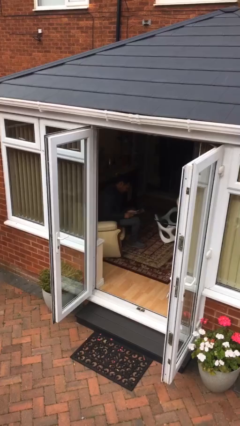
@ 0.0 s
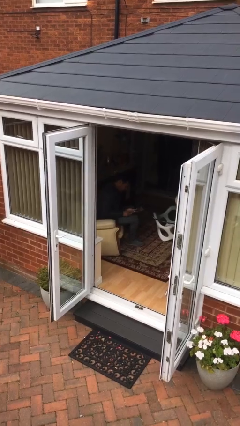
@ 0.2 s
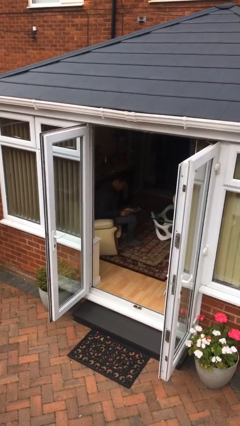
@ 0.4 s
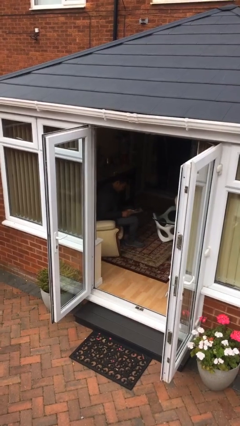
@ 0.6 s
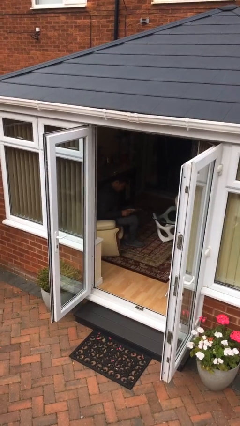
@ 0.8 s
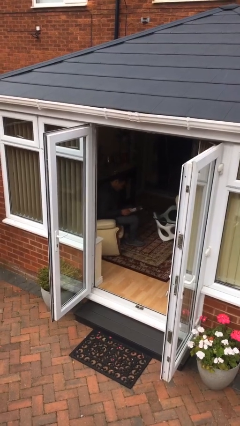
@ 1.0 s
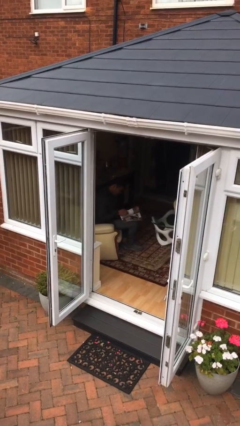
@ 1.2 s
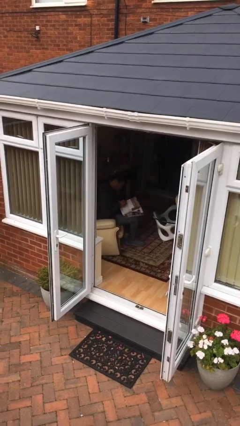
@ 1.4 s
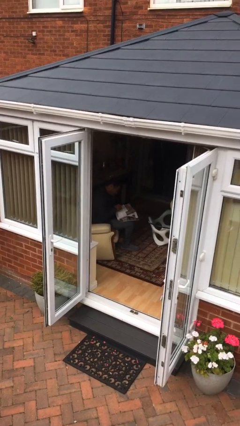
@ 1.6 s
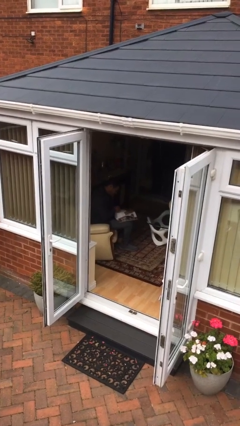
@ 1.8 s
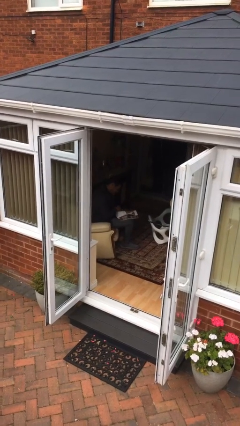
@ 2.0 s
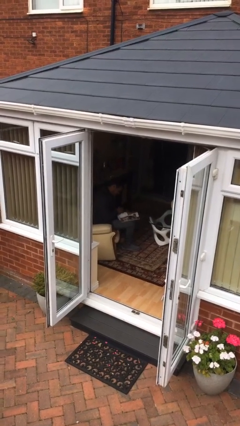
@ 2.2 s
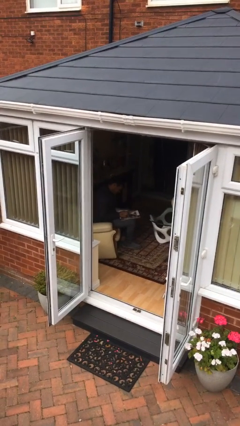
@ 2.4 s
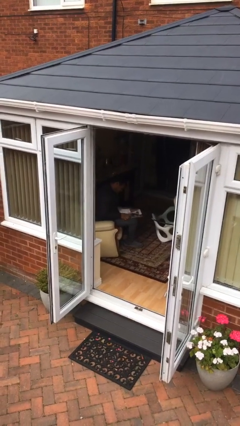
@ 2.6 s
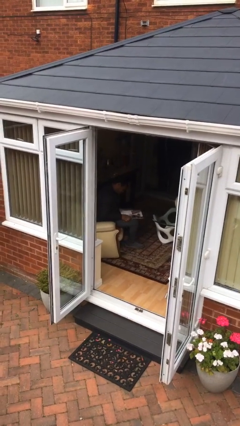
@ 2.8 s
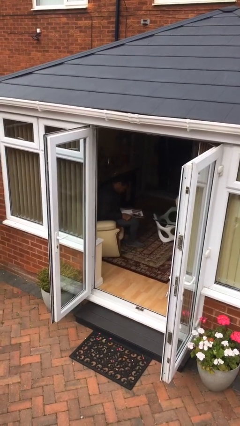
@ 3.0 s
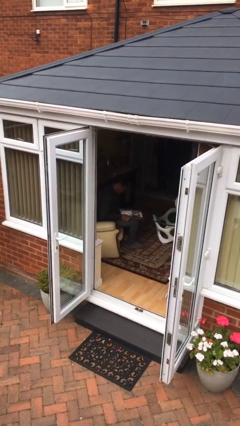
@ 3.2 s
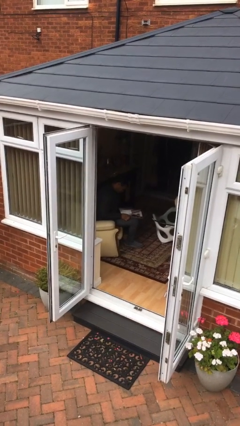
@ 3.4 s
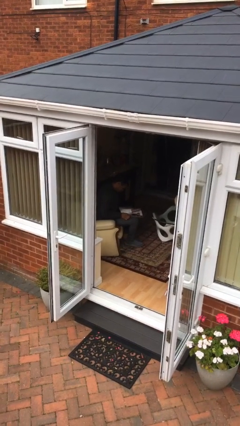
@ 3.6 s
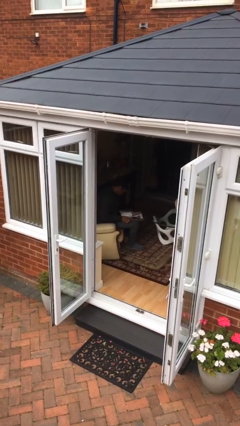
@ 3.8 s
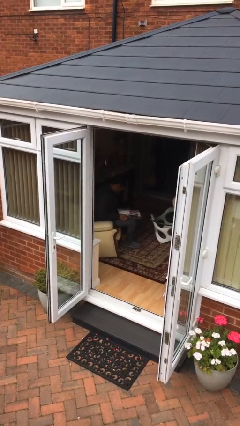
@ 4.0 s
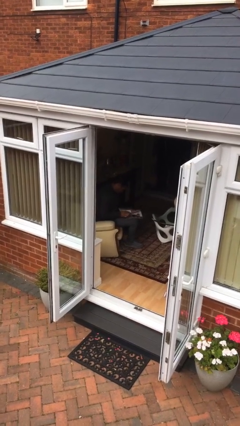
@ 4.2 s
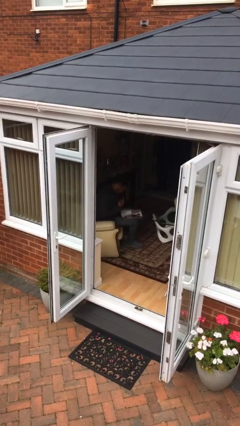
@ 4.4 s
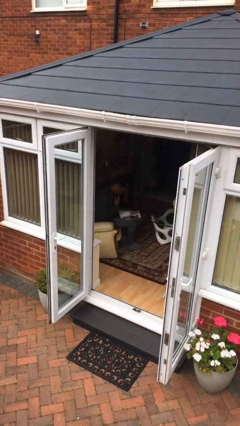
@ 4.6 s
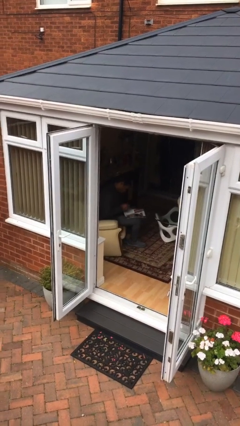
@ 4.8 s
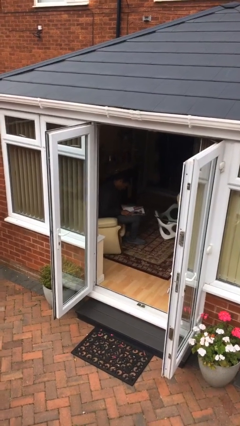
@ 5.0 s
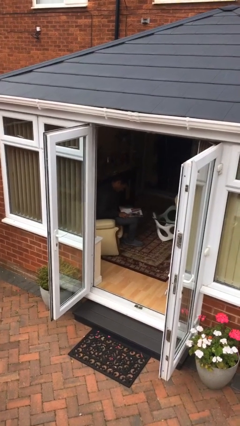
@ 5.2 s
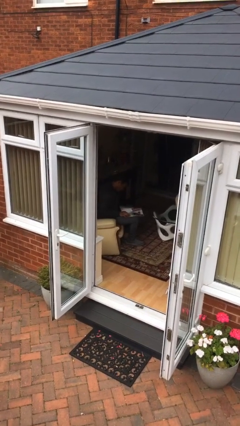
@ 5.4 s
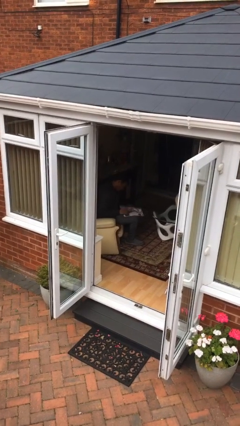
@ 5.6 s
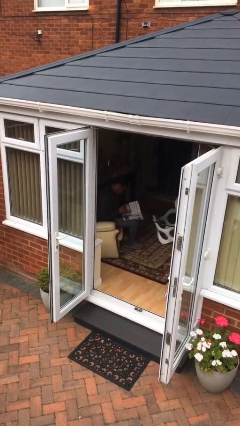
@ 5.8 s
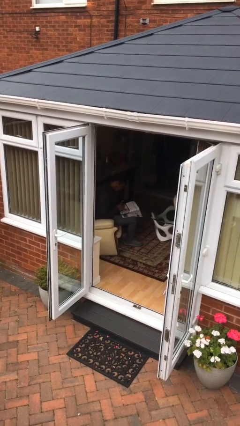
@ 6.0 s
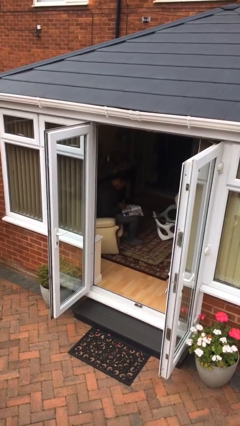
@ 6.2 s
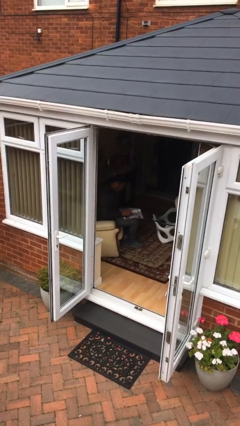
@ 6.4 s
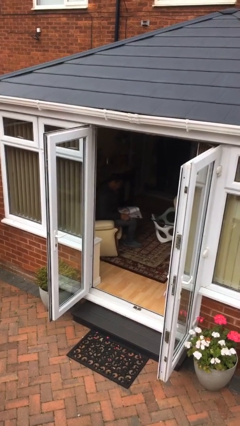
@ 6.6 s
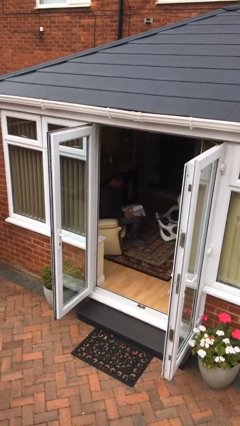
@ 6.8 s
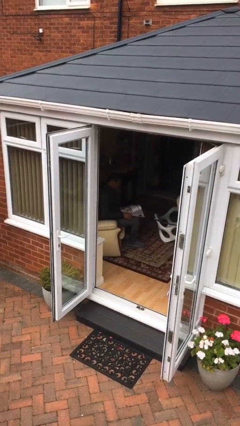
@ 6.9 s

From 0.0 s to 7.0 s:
person reads document

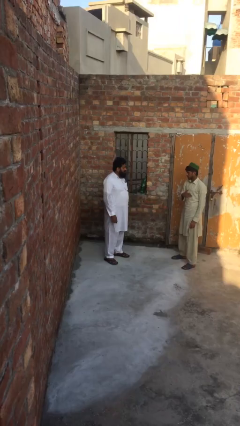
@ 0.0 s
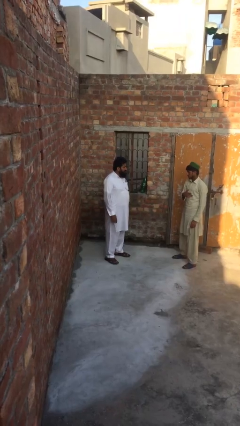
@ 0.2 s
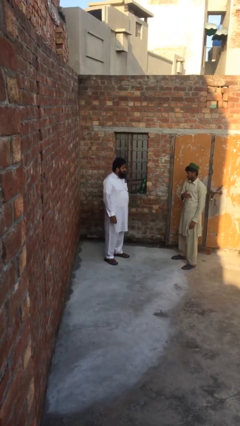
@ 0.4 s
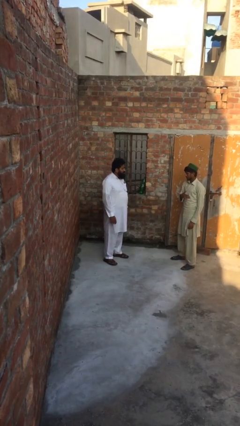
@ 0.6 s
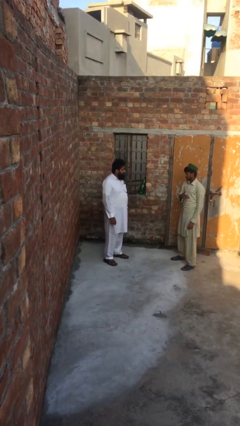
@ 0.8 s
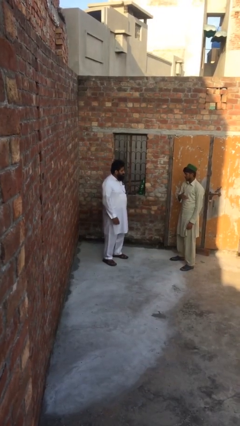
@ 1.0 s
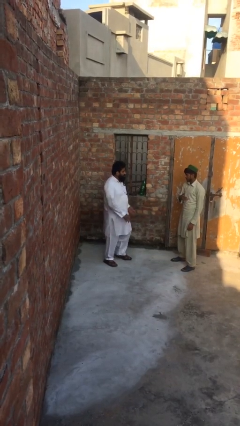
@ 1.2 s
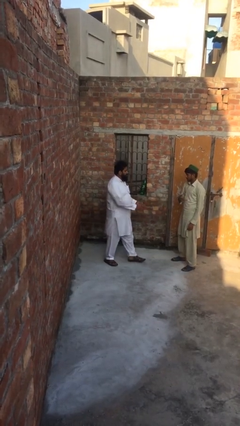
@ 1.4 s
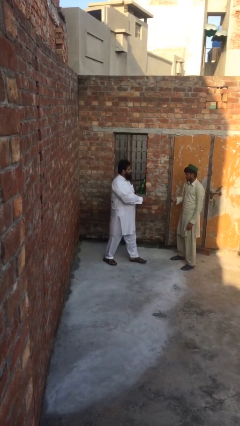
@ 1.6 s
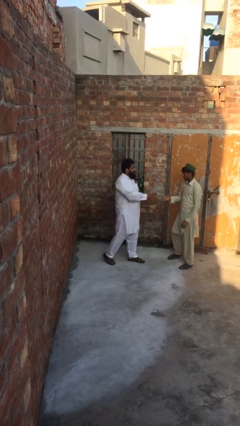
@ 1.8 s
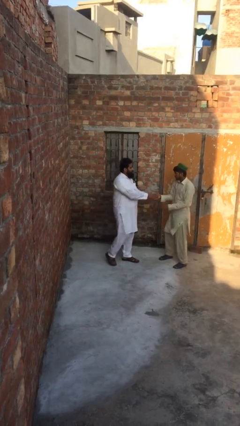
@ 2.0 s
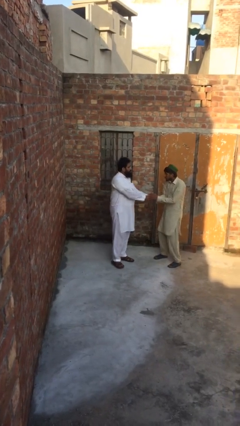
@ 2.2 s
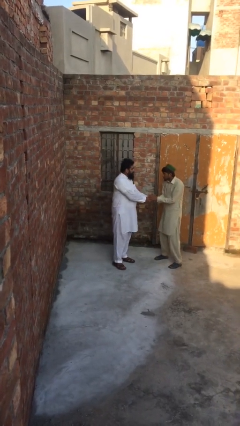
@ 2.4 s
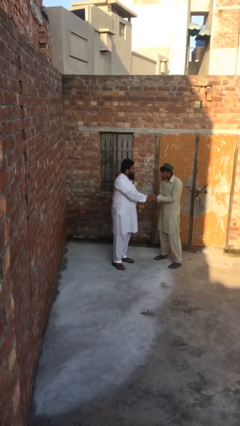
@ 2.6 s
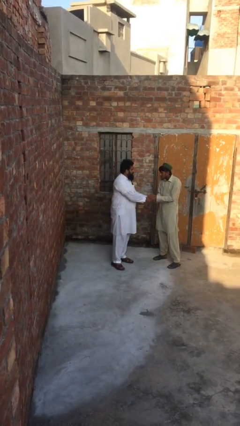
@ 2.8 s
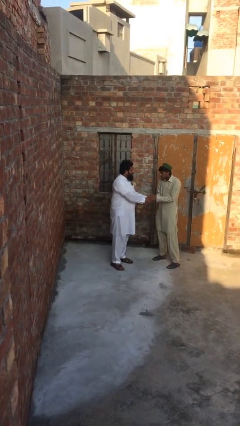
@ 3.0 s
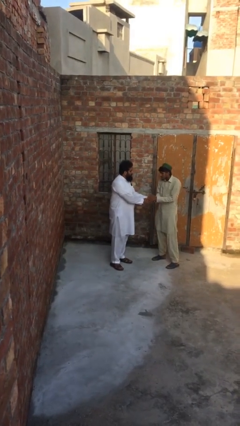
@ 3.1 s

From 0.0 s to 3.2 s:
person shakes hand

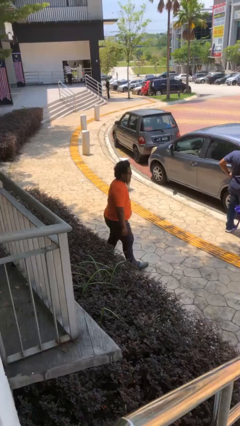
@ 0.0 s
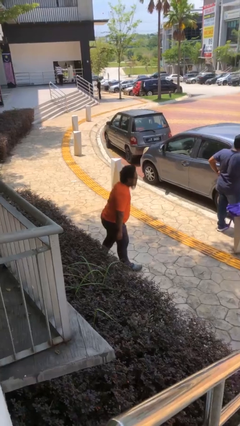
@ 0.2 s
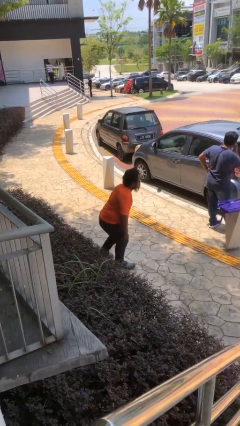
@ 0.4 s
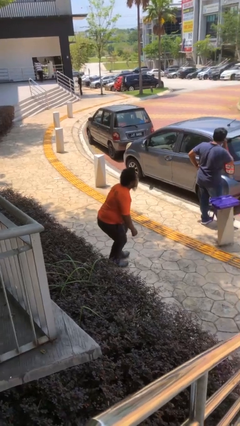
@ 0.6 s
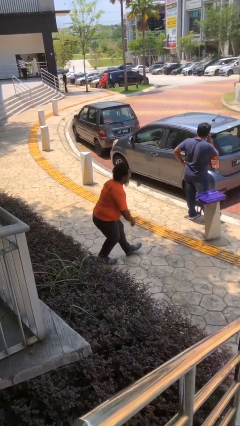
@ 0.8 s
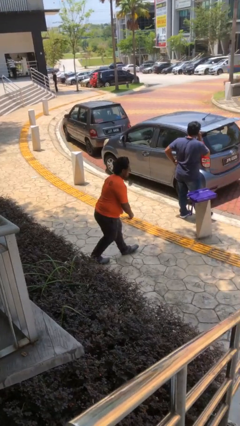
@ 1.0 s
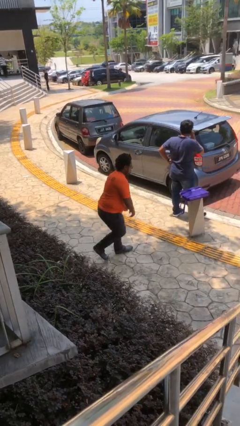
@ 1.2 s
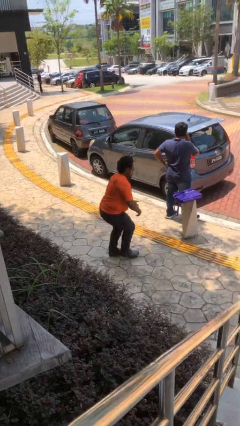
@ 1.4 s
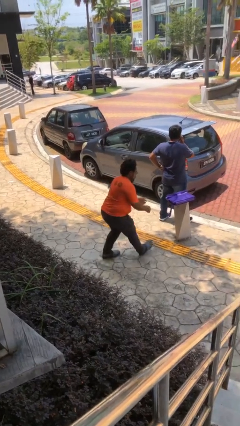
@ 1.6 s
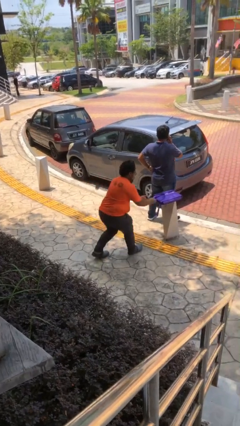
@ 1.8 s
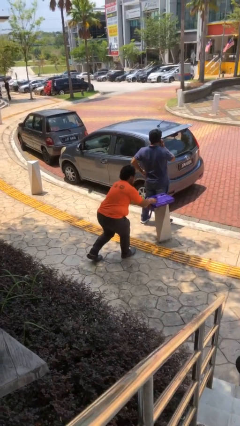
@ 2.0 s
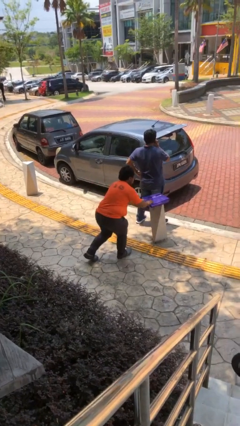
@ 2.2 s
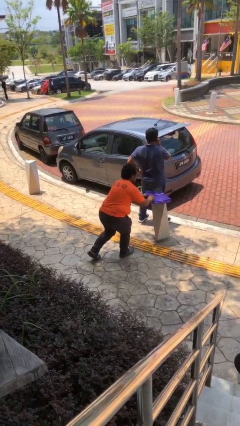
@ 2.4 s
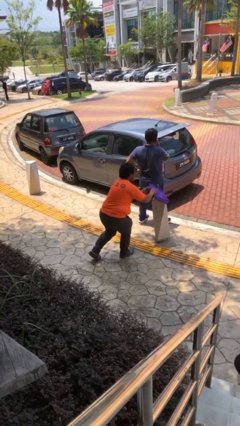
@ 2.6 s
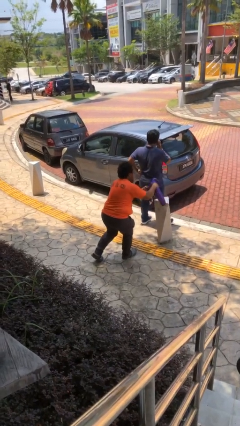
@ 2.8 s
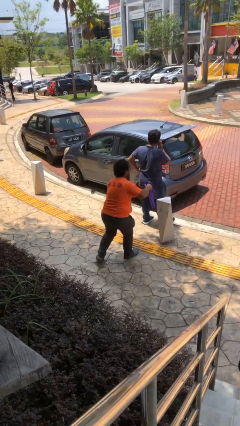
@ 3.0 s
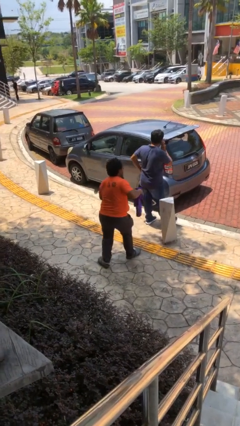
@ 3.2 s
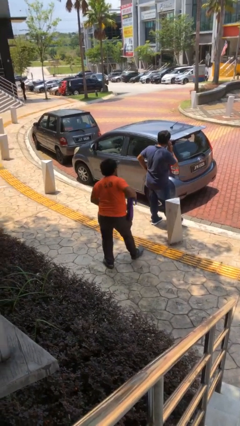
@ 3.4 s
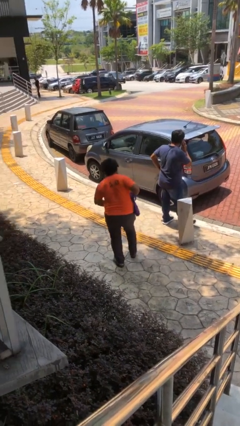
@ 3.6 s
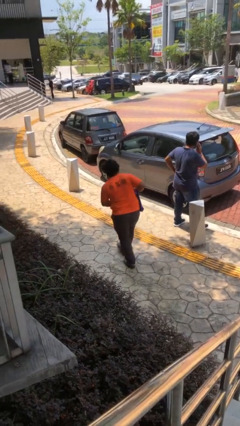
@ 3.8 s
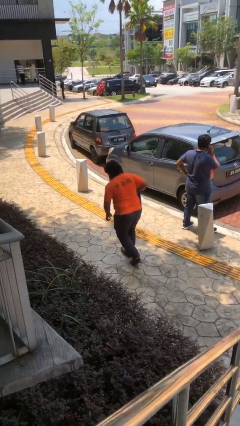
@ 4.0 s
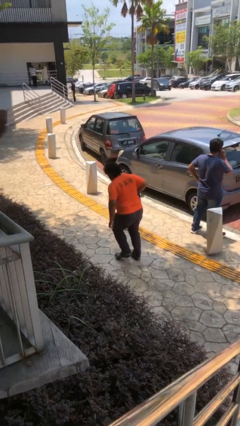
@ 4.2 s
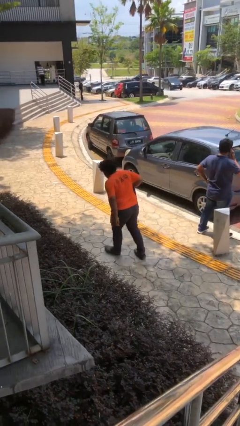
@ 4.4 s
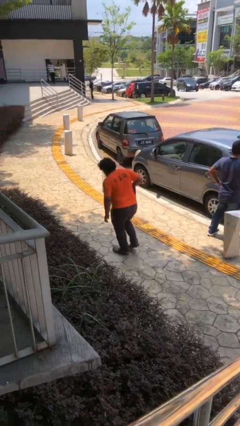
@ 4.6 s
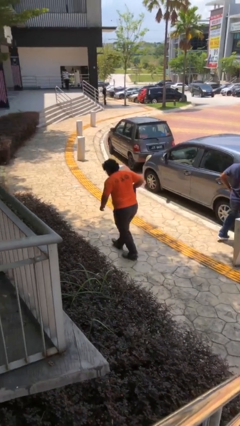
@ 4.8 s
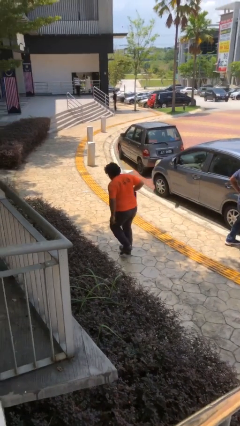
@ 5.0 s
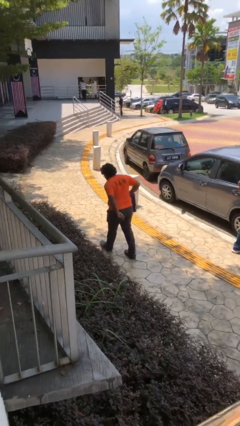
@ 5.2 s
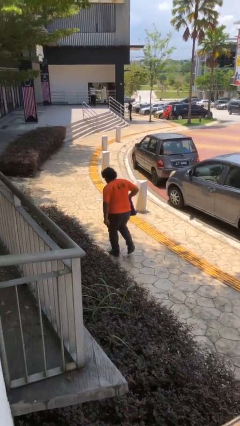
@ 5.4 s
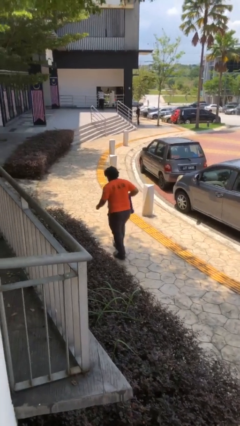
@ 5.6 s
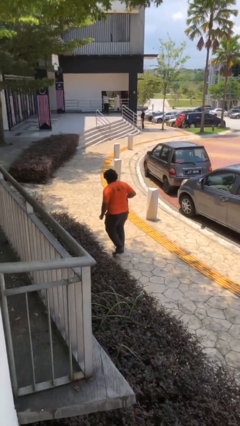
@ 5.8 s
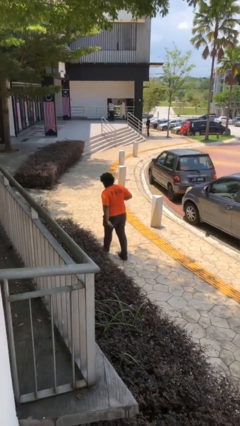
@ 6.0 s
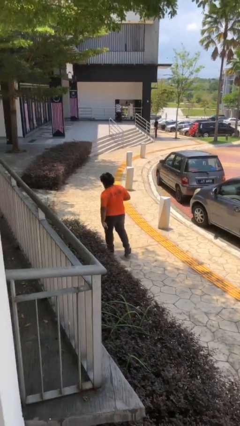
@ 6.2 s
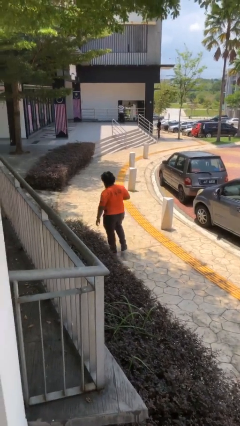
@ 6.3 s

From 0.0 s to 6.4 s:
person steals object from person

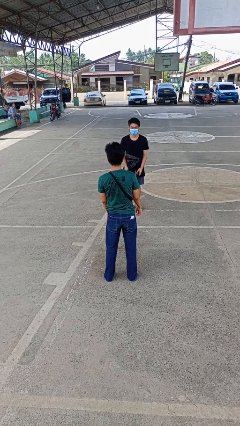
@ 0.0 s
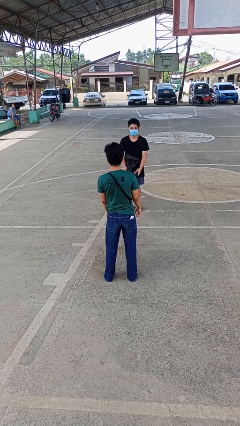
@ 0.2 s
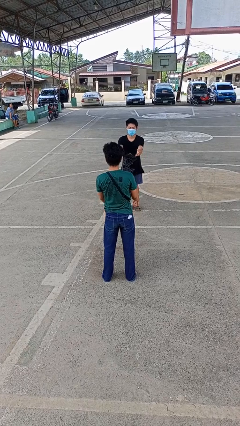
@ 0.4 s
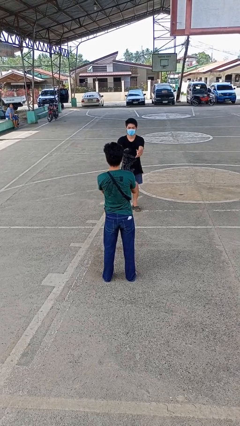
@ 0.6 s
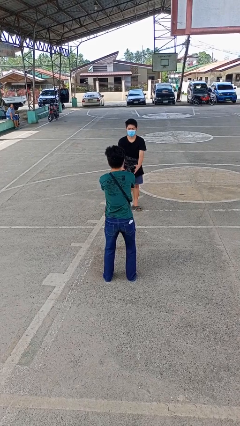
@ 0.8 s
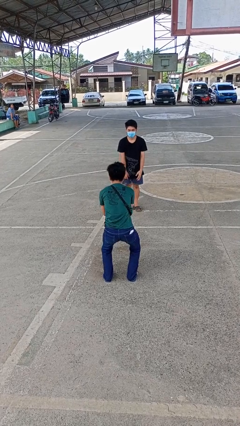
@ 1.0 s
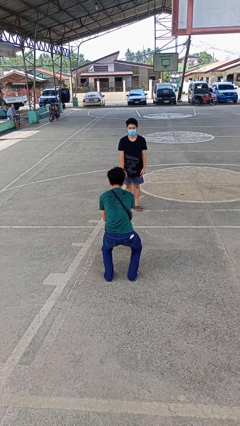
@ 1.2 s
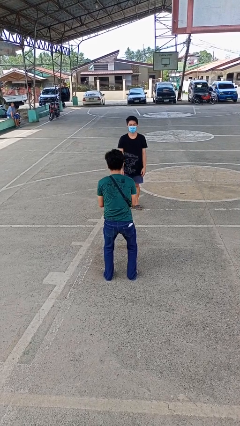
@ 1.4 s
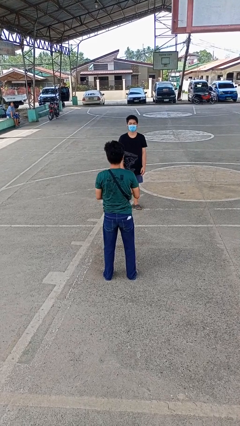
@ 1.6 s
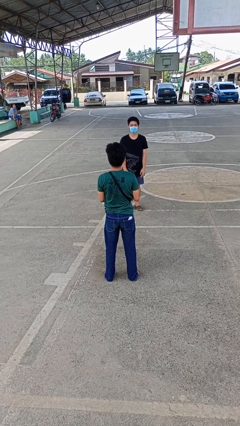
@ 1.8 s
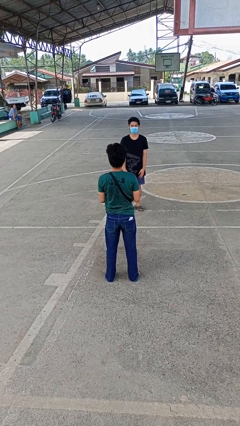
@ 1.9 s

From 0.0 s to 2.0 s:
person catches object from person
